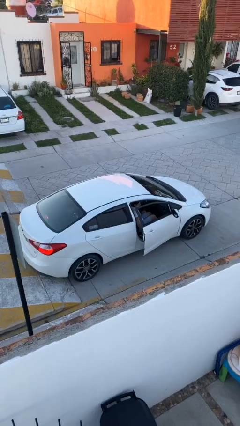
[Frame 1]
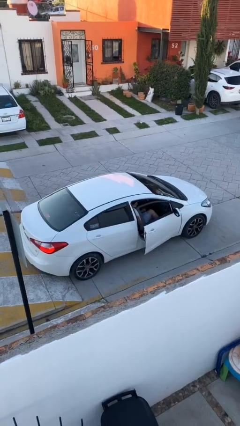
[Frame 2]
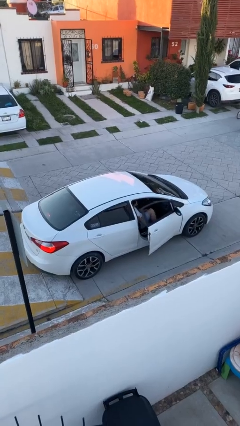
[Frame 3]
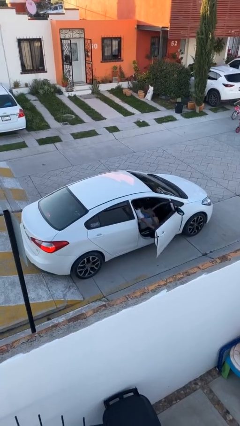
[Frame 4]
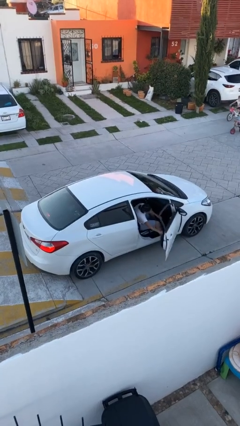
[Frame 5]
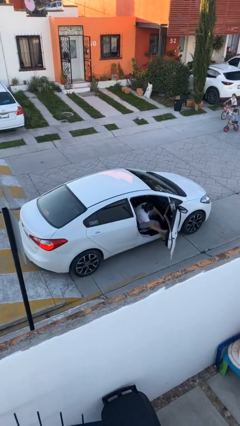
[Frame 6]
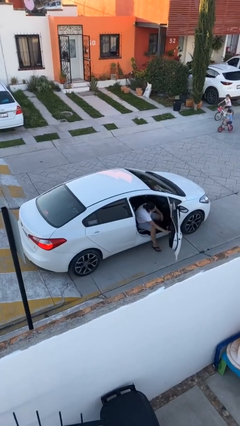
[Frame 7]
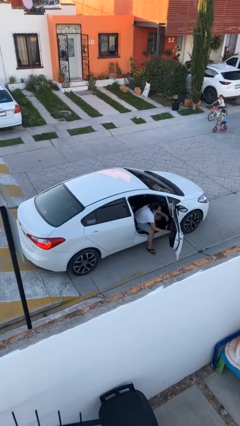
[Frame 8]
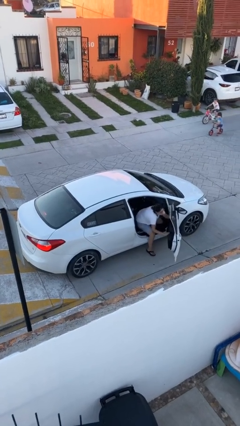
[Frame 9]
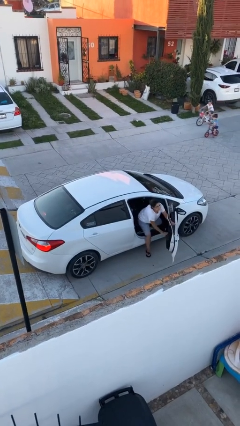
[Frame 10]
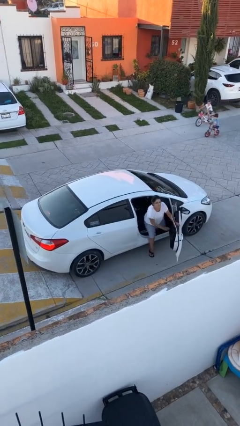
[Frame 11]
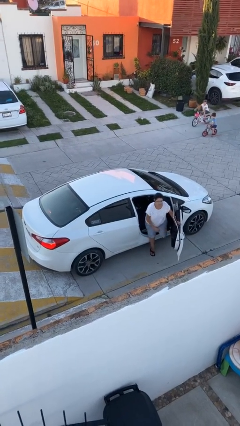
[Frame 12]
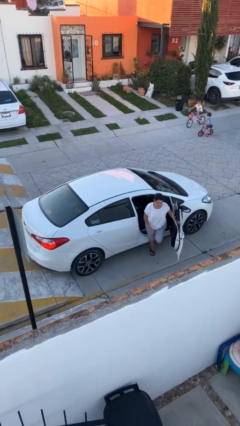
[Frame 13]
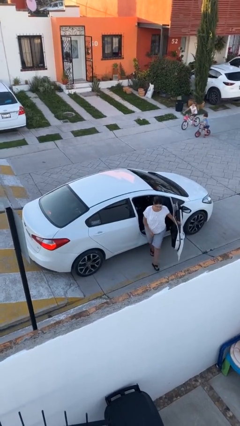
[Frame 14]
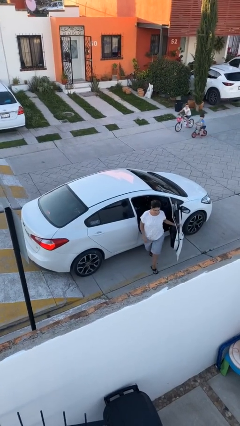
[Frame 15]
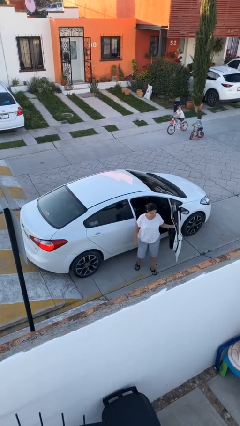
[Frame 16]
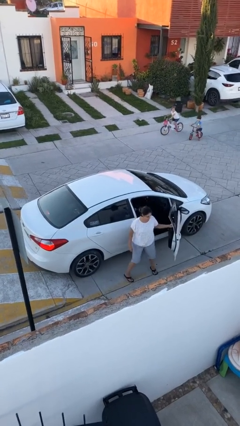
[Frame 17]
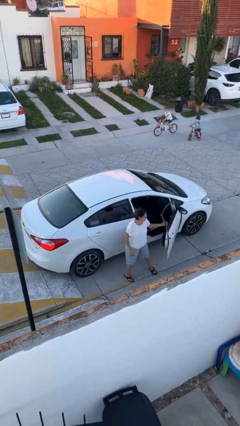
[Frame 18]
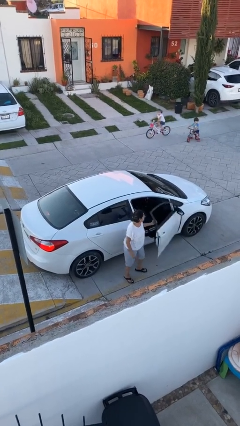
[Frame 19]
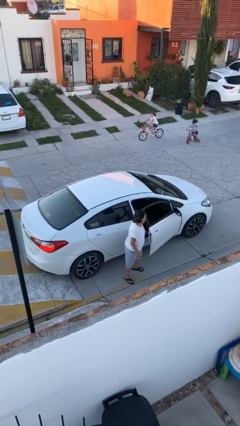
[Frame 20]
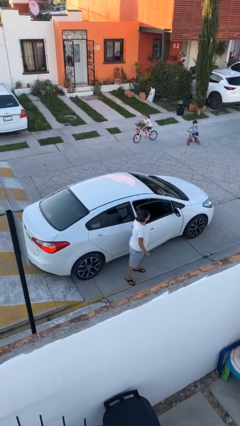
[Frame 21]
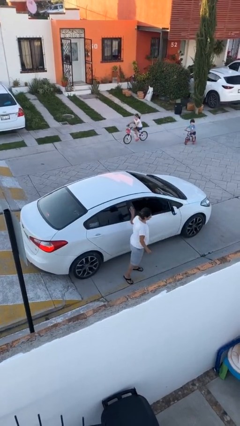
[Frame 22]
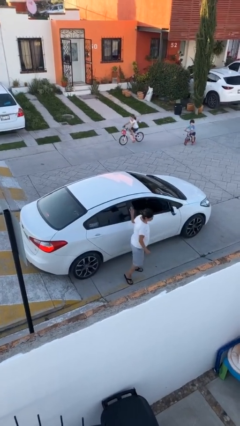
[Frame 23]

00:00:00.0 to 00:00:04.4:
car drops off person

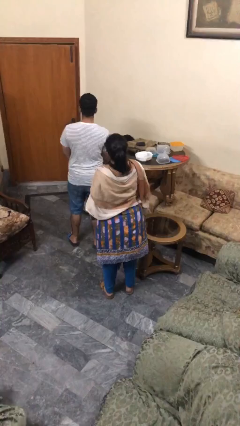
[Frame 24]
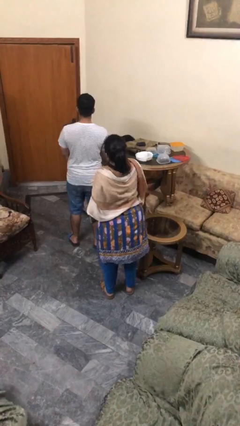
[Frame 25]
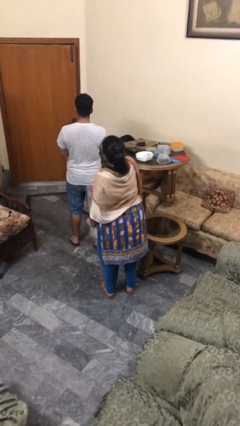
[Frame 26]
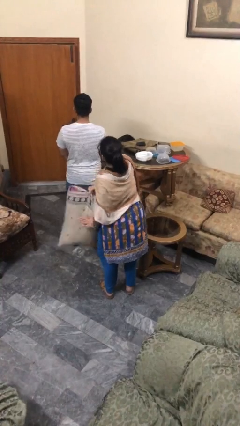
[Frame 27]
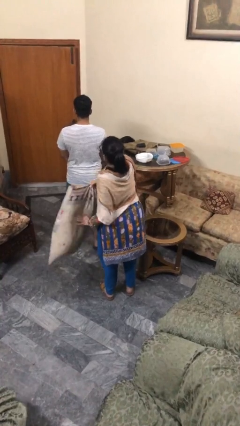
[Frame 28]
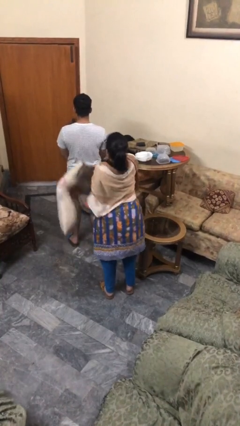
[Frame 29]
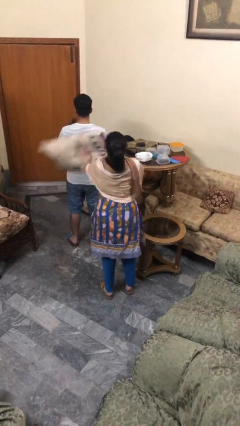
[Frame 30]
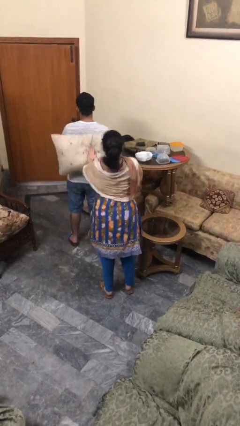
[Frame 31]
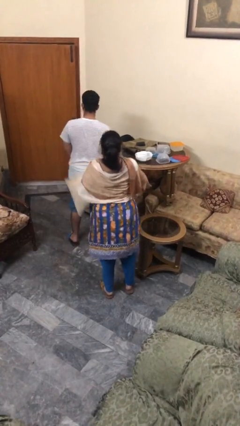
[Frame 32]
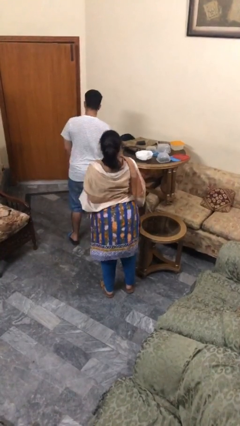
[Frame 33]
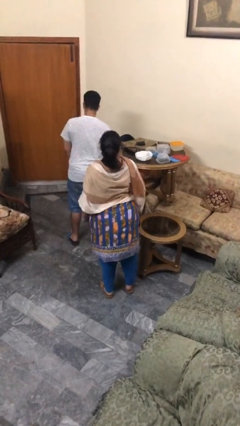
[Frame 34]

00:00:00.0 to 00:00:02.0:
person hits person with pillow

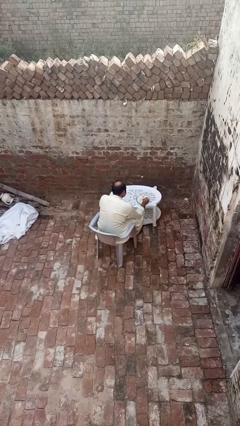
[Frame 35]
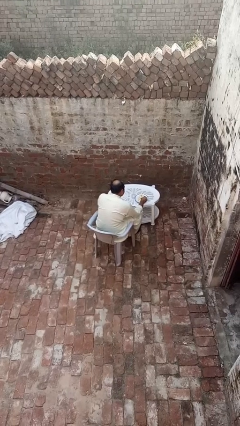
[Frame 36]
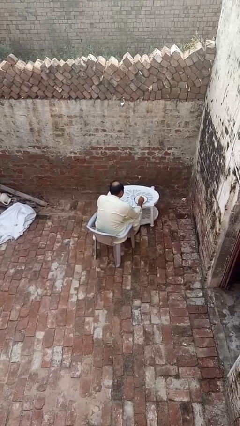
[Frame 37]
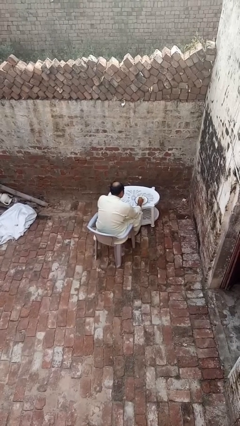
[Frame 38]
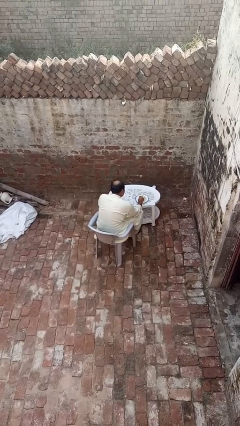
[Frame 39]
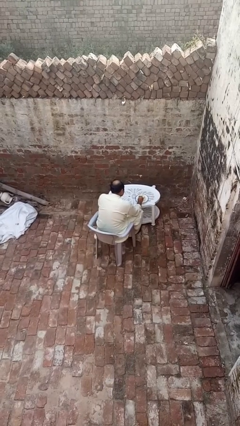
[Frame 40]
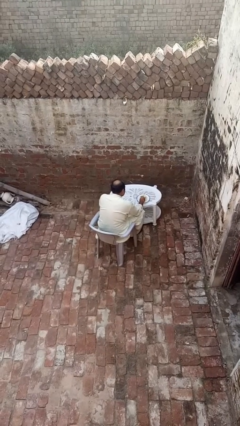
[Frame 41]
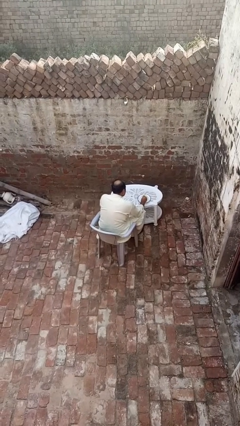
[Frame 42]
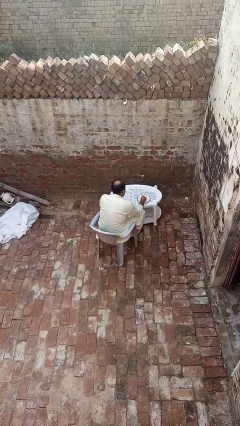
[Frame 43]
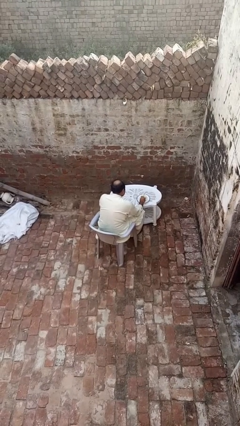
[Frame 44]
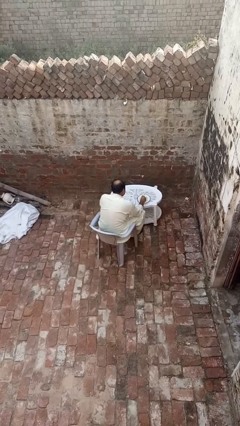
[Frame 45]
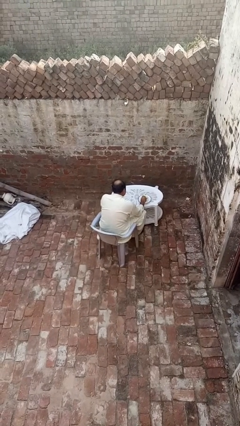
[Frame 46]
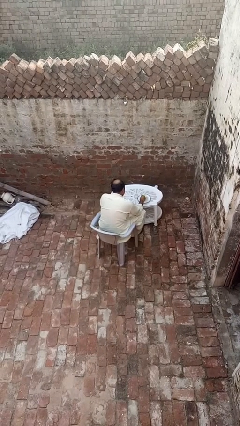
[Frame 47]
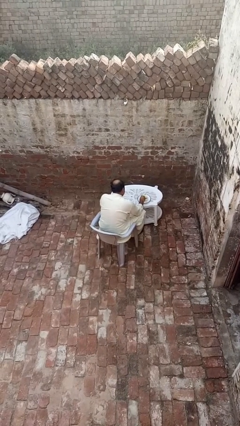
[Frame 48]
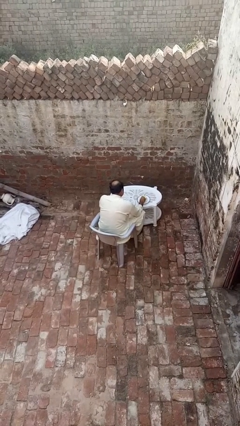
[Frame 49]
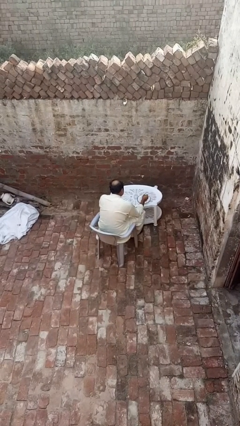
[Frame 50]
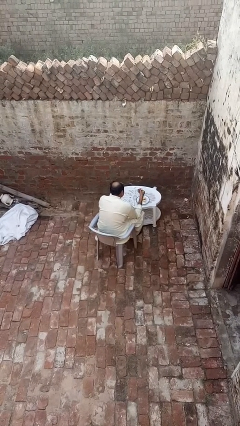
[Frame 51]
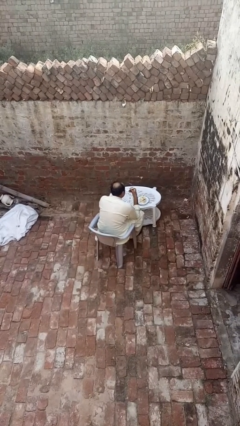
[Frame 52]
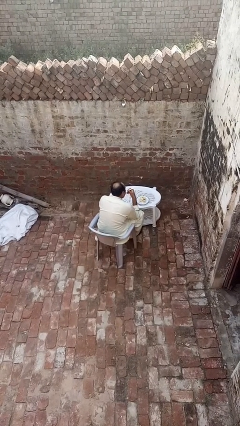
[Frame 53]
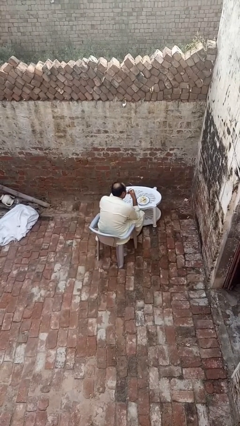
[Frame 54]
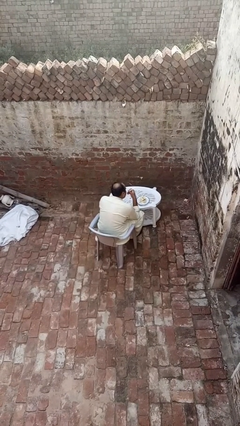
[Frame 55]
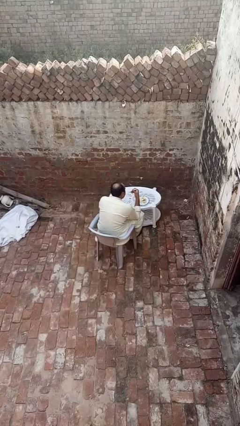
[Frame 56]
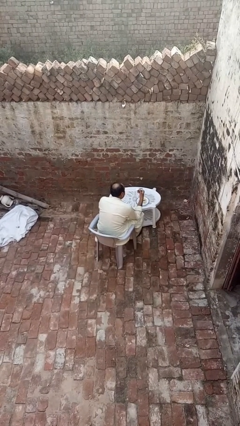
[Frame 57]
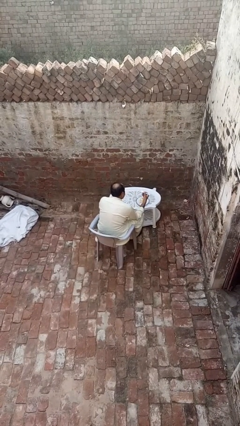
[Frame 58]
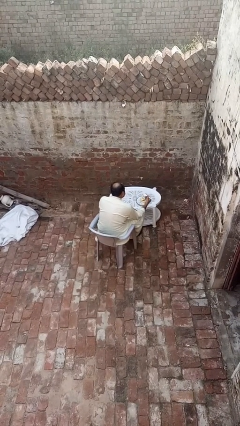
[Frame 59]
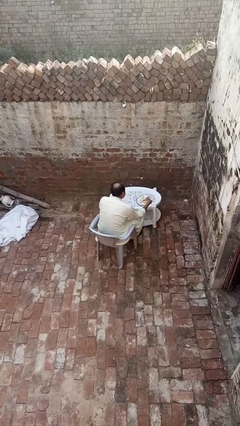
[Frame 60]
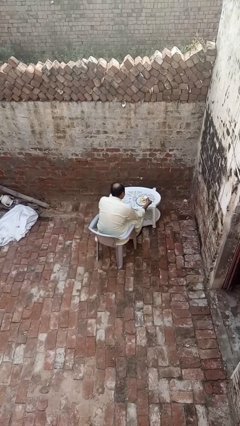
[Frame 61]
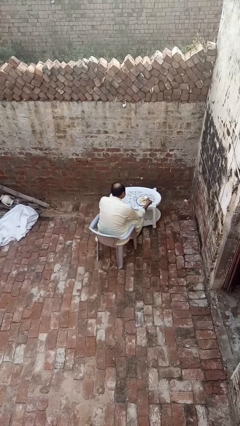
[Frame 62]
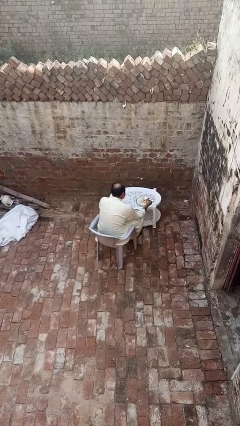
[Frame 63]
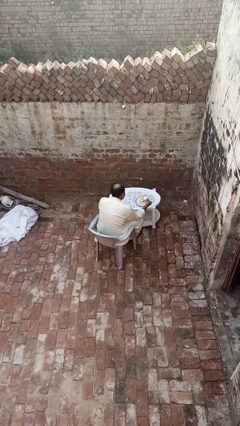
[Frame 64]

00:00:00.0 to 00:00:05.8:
person eats with utensil

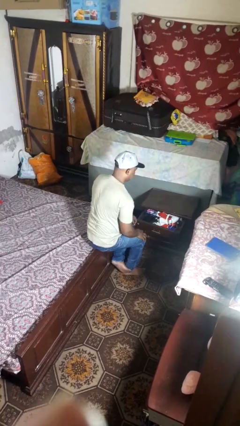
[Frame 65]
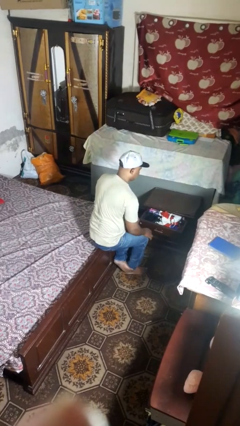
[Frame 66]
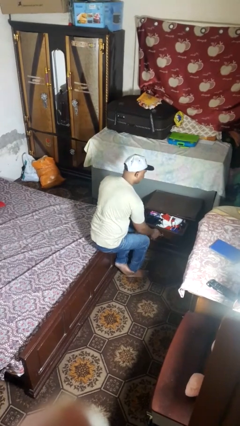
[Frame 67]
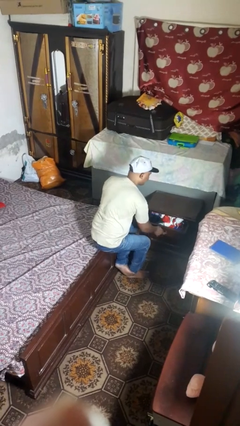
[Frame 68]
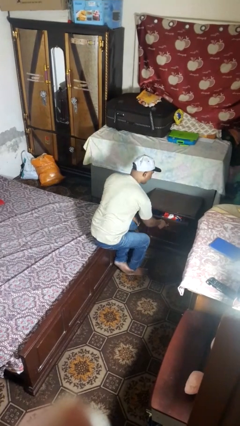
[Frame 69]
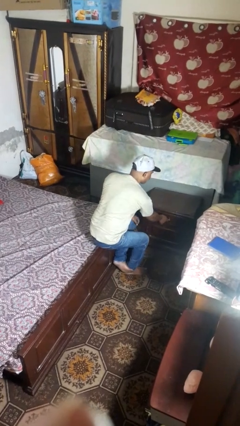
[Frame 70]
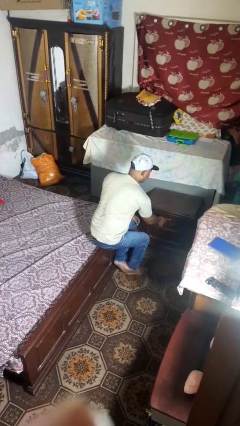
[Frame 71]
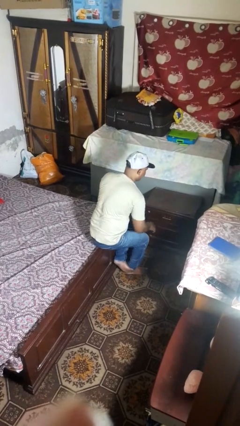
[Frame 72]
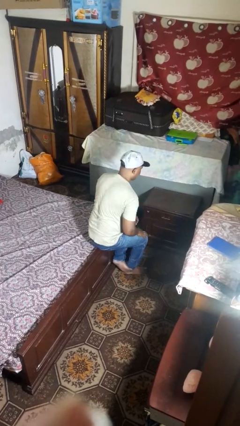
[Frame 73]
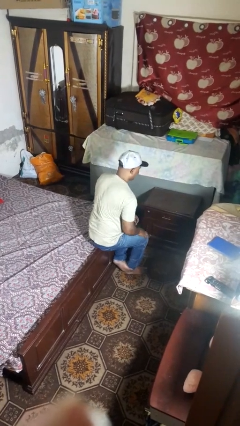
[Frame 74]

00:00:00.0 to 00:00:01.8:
person closes dresser drawer

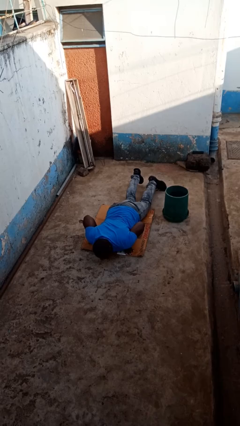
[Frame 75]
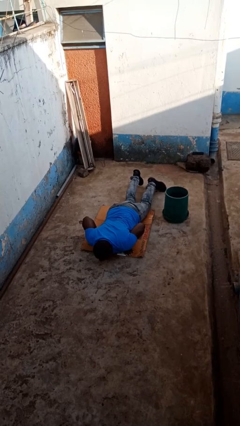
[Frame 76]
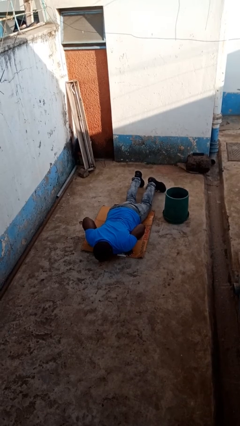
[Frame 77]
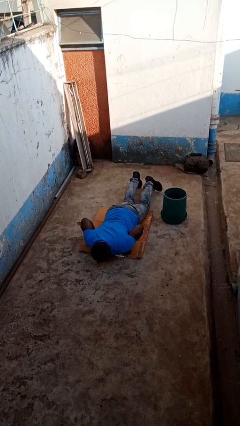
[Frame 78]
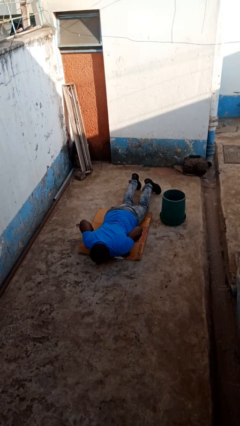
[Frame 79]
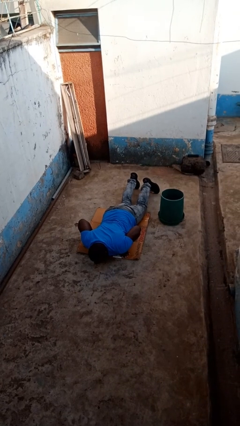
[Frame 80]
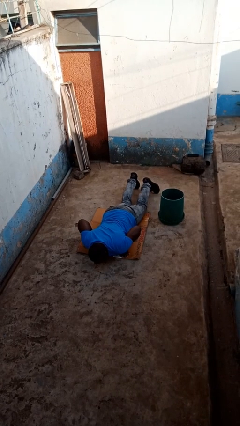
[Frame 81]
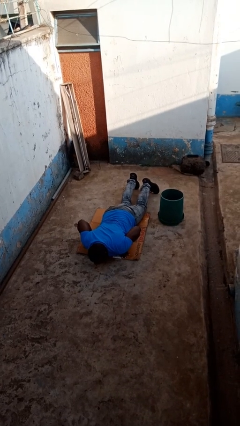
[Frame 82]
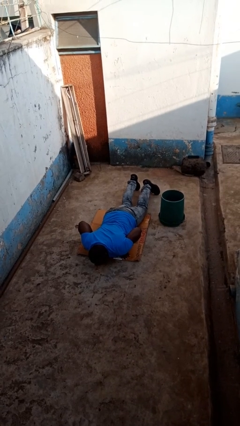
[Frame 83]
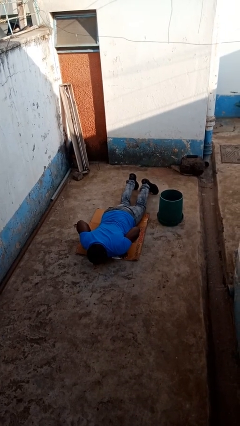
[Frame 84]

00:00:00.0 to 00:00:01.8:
person lies down on floor

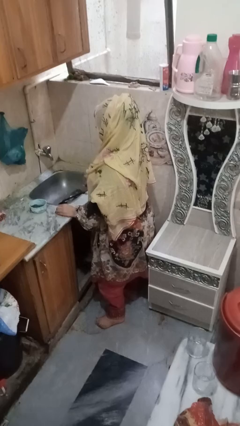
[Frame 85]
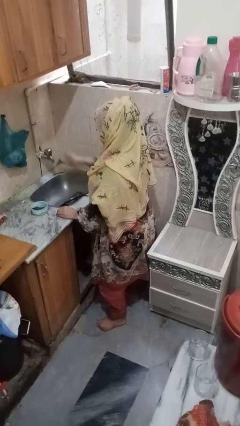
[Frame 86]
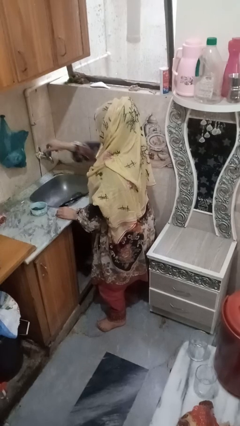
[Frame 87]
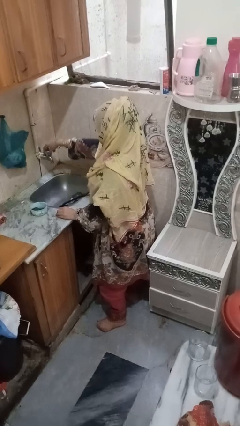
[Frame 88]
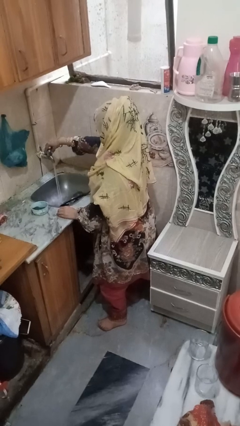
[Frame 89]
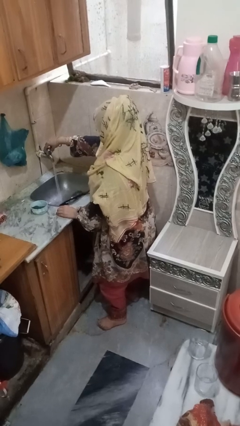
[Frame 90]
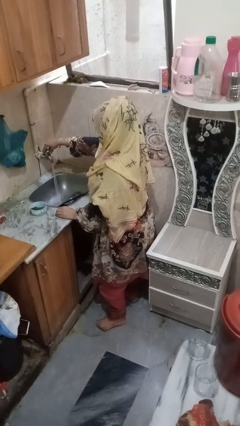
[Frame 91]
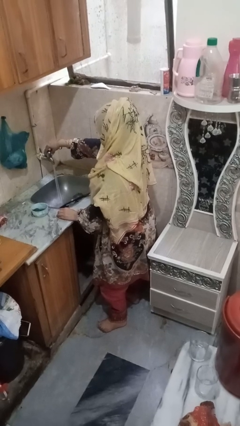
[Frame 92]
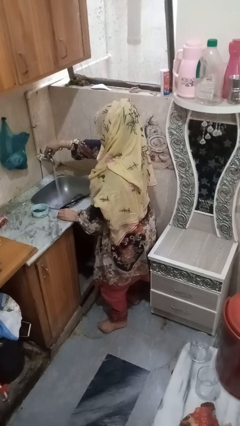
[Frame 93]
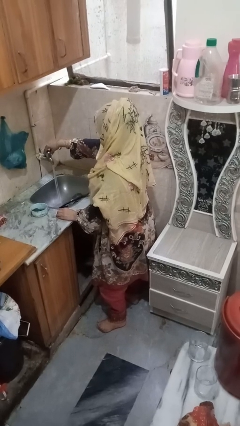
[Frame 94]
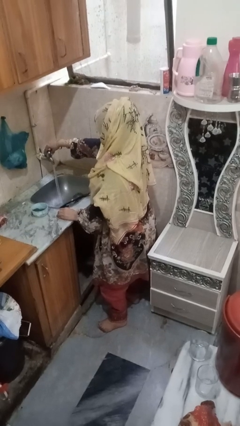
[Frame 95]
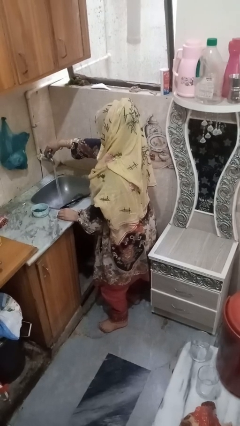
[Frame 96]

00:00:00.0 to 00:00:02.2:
person turns on faucet
